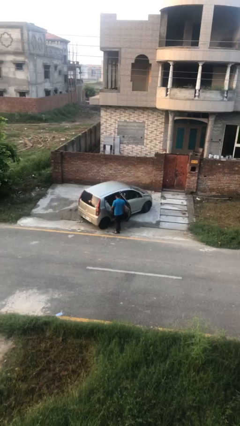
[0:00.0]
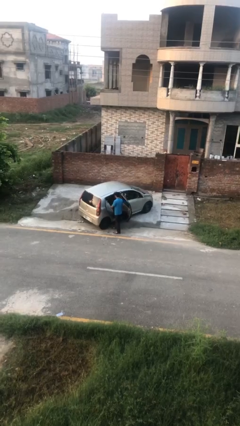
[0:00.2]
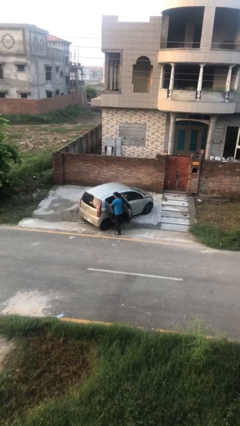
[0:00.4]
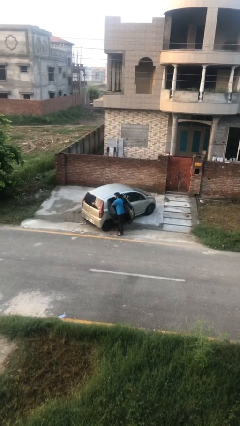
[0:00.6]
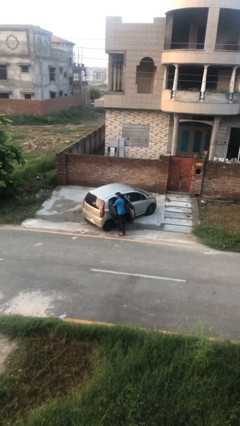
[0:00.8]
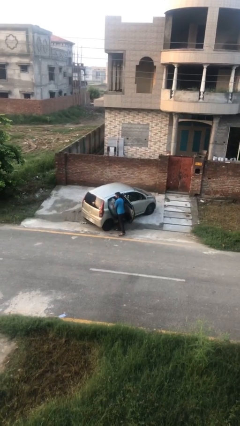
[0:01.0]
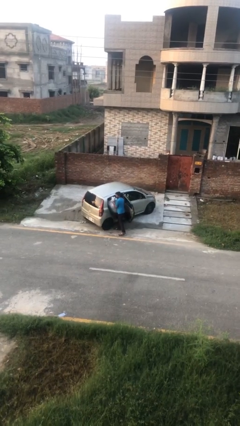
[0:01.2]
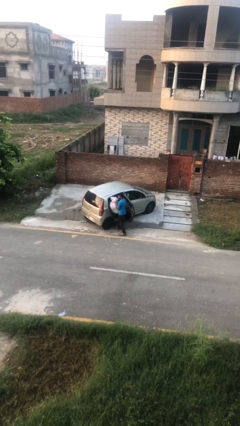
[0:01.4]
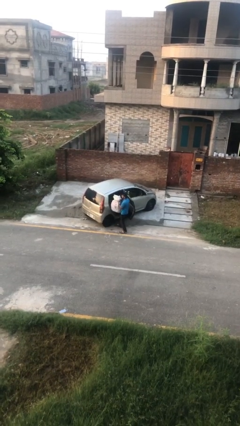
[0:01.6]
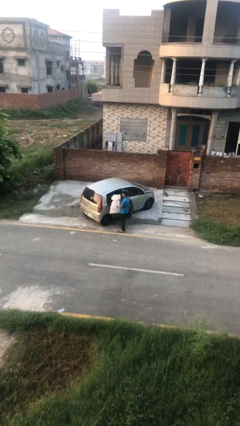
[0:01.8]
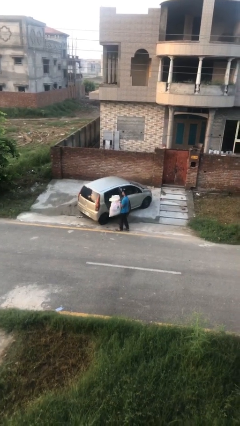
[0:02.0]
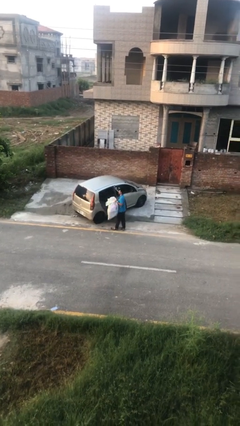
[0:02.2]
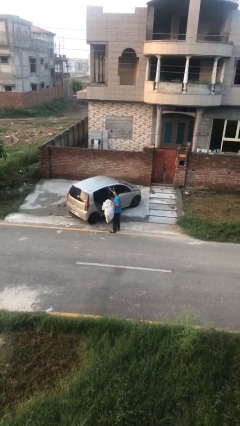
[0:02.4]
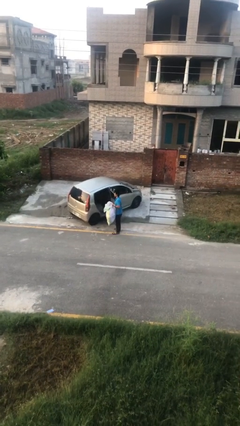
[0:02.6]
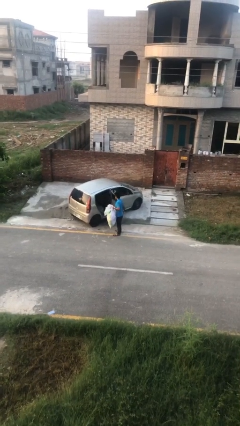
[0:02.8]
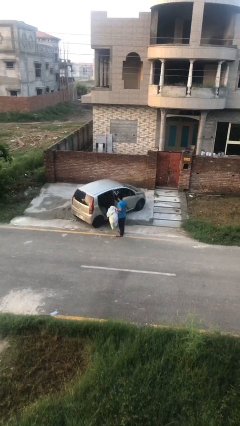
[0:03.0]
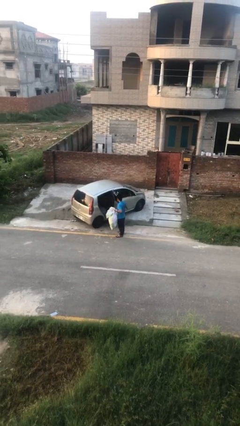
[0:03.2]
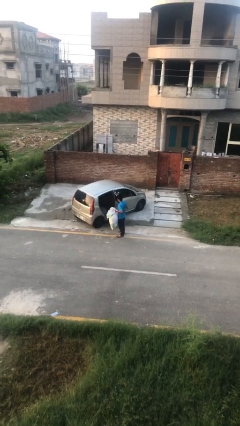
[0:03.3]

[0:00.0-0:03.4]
person unloads car

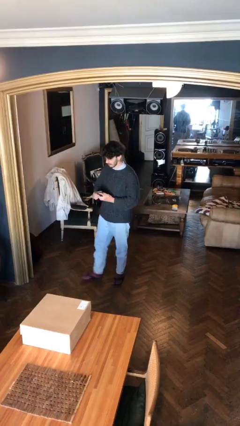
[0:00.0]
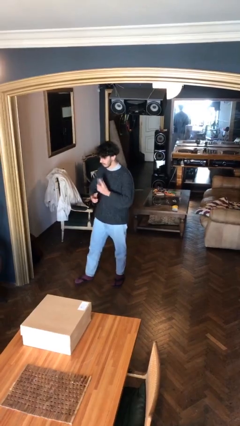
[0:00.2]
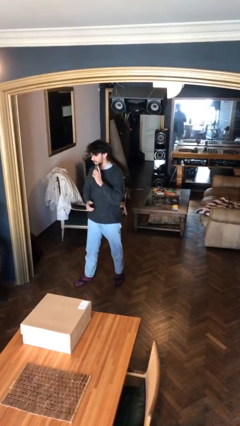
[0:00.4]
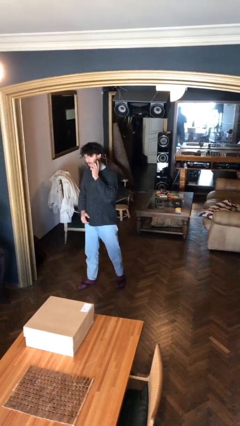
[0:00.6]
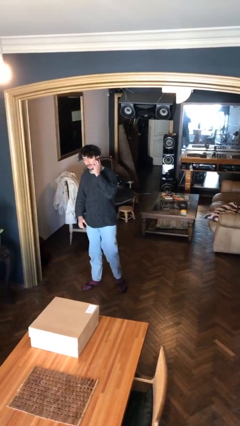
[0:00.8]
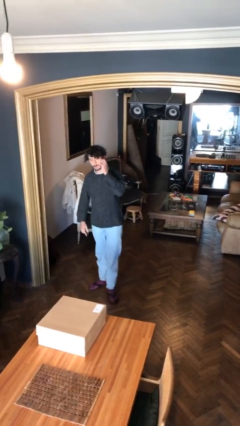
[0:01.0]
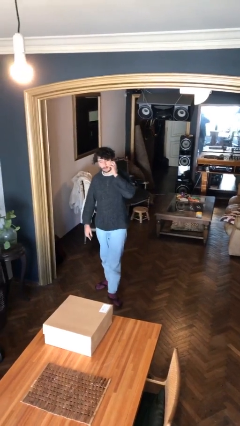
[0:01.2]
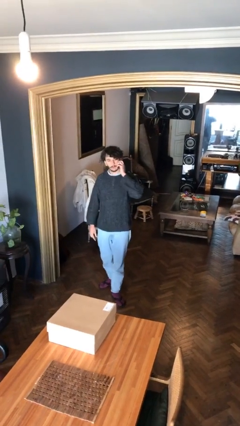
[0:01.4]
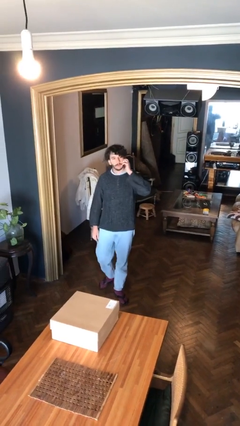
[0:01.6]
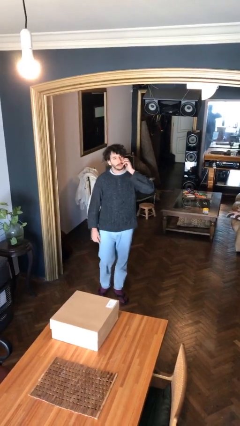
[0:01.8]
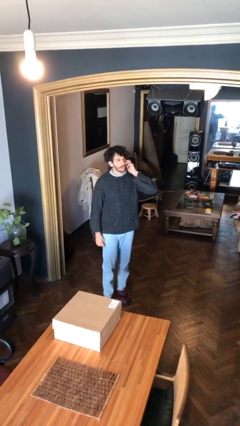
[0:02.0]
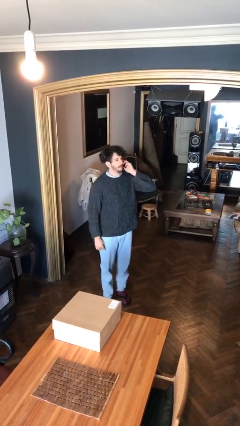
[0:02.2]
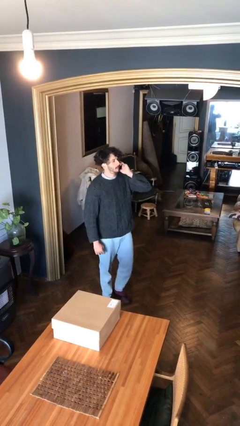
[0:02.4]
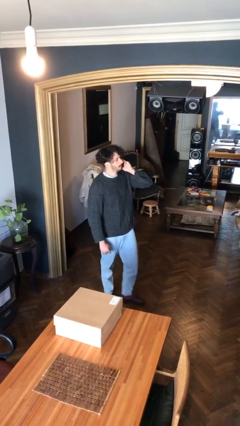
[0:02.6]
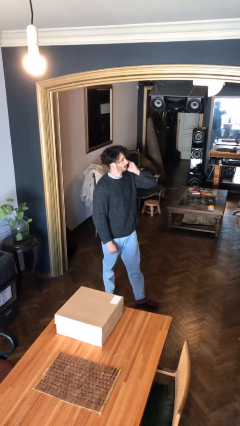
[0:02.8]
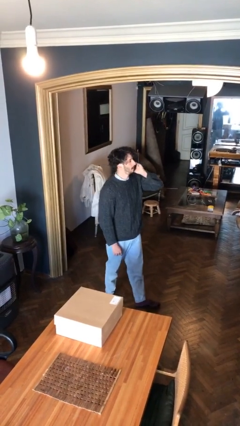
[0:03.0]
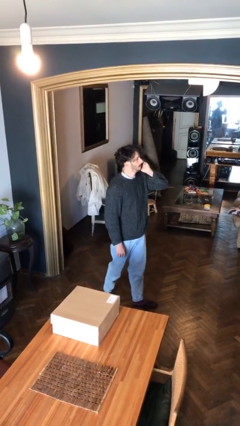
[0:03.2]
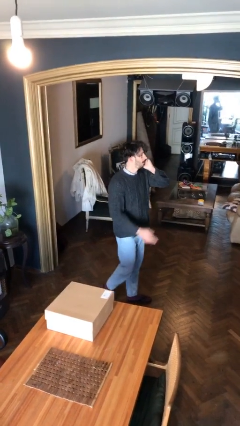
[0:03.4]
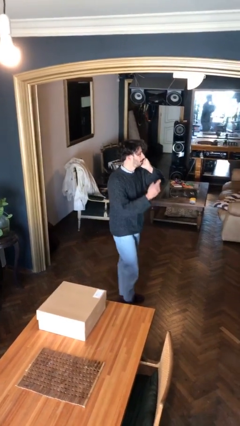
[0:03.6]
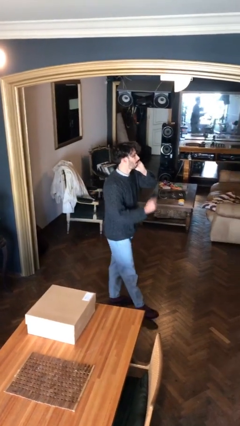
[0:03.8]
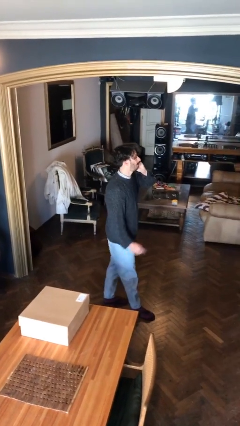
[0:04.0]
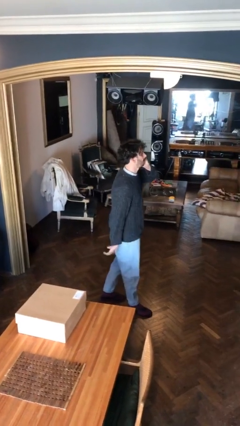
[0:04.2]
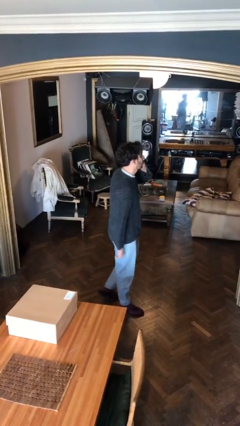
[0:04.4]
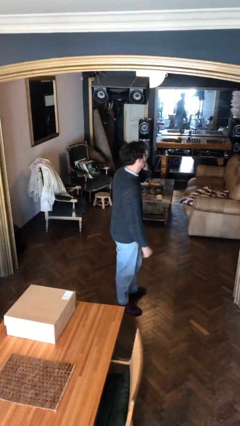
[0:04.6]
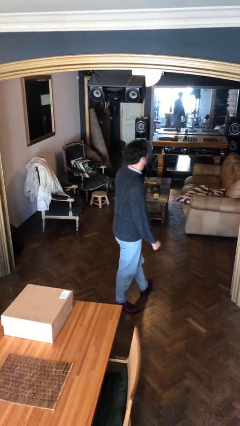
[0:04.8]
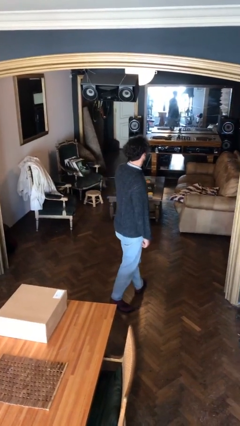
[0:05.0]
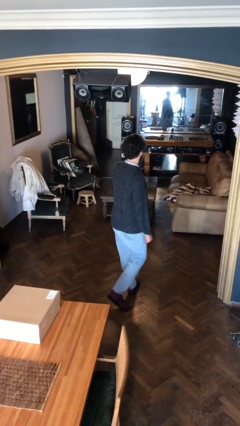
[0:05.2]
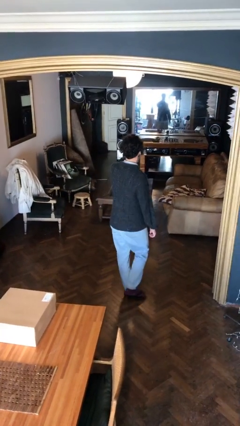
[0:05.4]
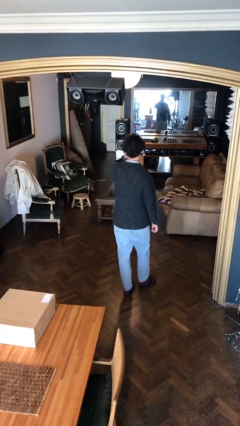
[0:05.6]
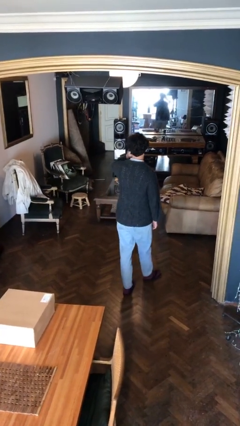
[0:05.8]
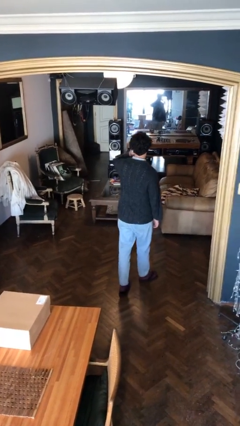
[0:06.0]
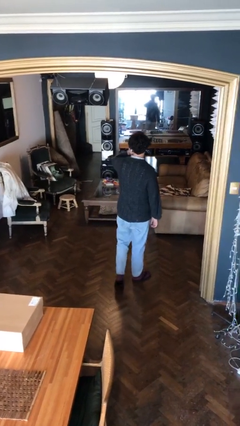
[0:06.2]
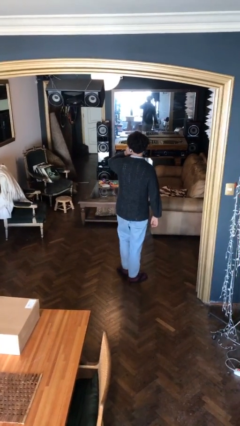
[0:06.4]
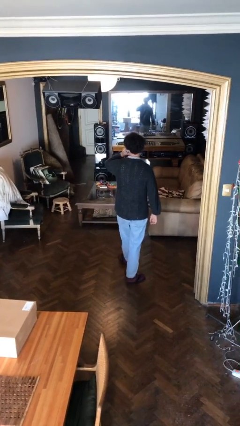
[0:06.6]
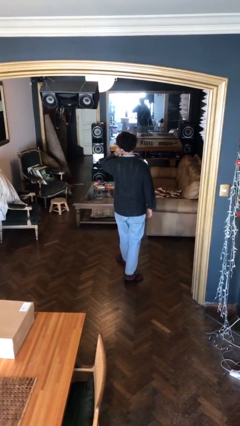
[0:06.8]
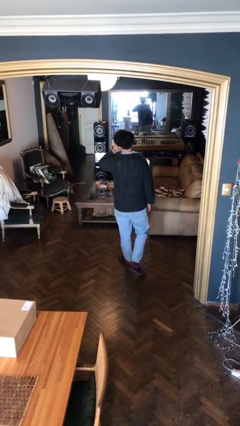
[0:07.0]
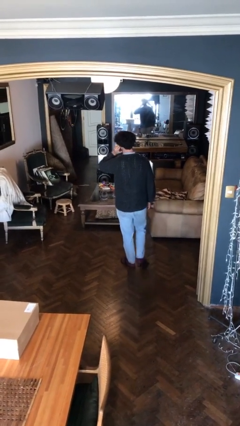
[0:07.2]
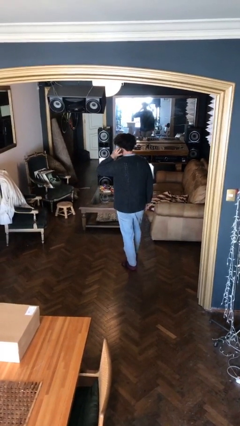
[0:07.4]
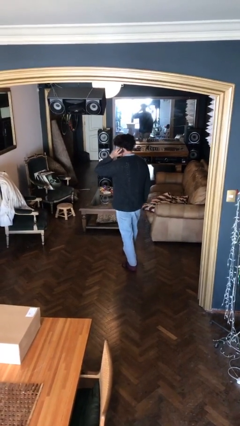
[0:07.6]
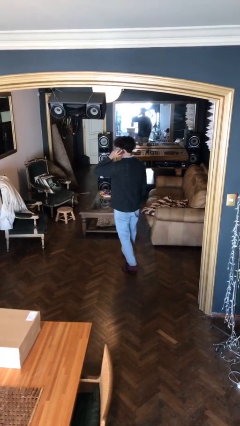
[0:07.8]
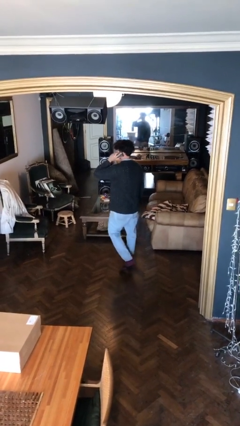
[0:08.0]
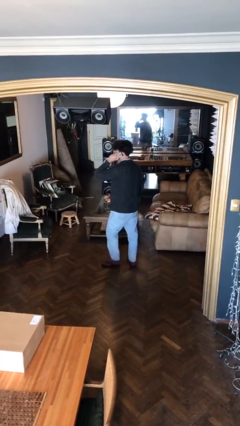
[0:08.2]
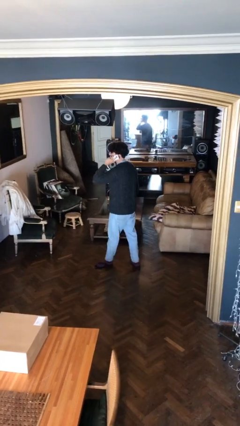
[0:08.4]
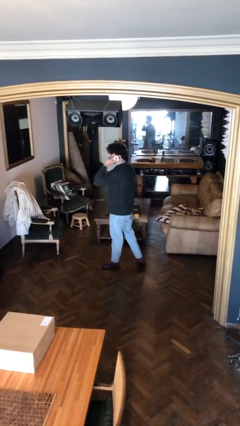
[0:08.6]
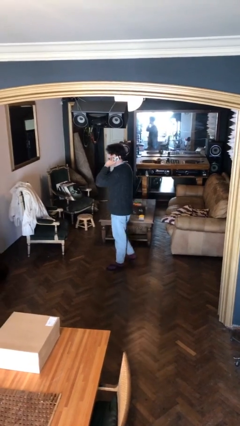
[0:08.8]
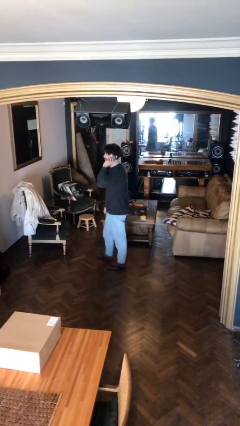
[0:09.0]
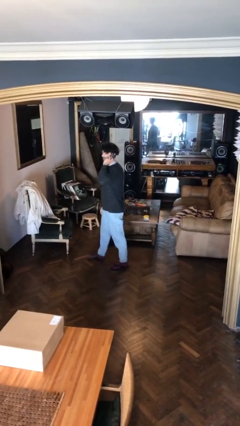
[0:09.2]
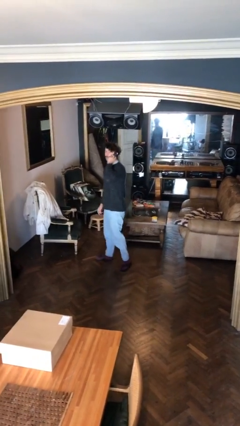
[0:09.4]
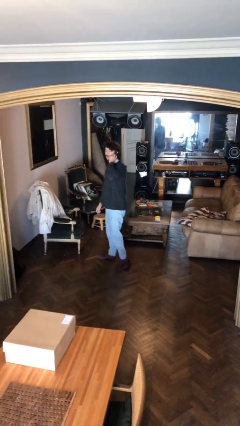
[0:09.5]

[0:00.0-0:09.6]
person talks on phone

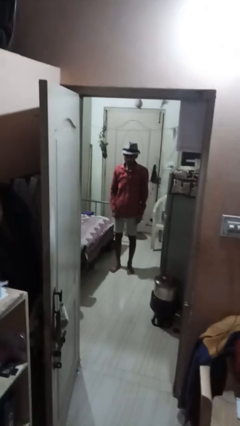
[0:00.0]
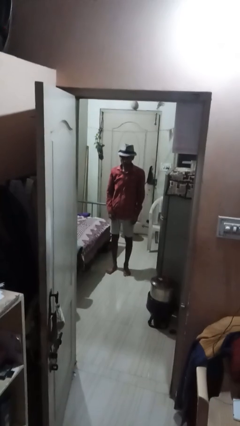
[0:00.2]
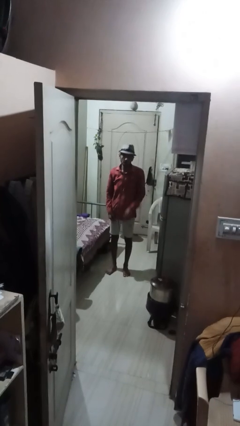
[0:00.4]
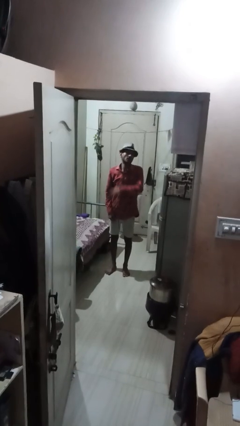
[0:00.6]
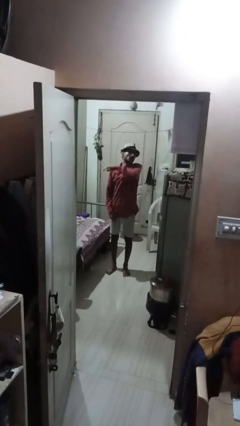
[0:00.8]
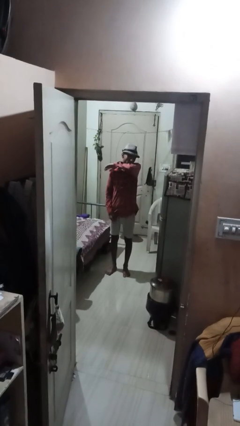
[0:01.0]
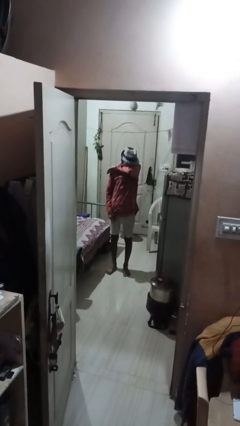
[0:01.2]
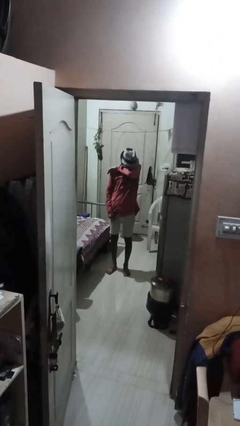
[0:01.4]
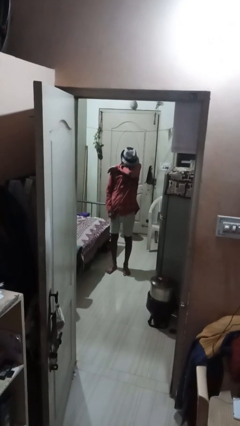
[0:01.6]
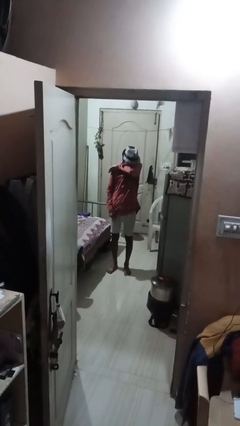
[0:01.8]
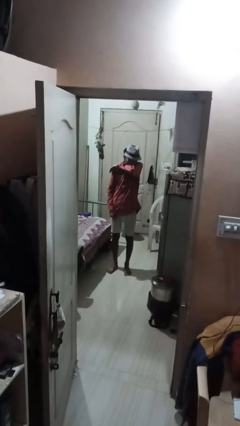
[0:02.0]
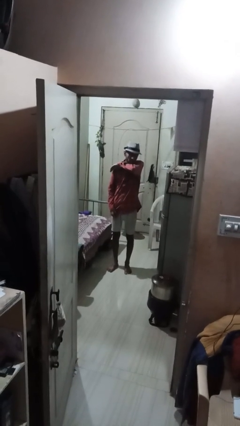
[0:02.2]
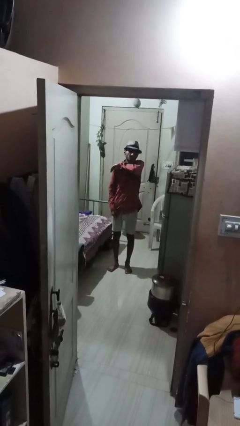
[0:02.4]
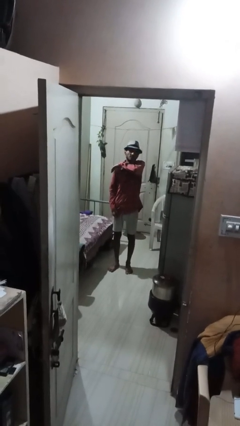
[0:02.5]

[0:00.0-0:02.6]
person sneezes into arm

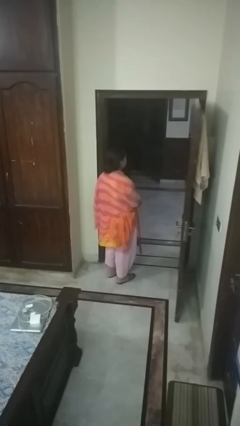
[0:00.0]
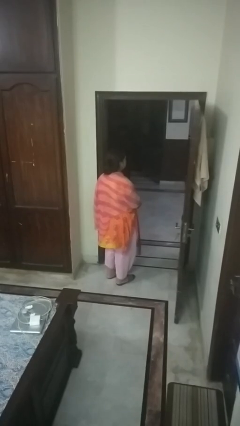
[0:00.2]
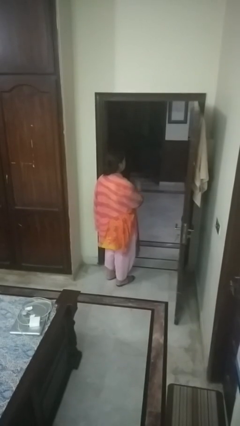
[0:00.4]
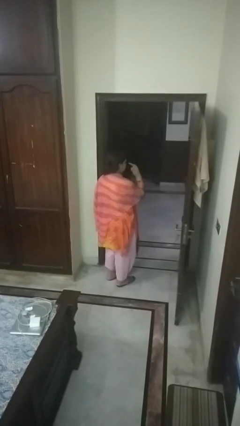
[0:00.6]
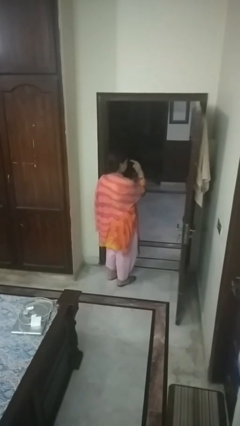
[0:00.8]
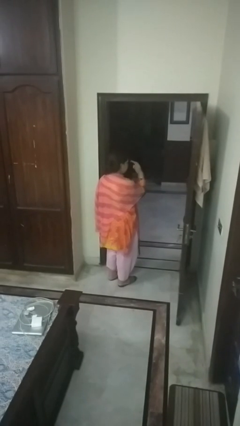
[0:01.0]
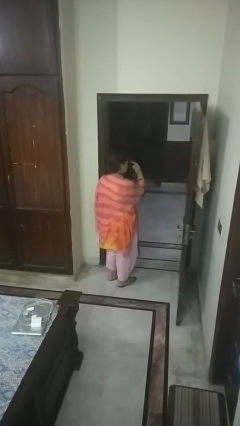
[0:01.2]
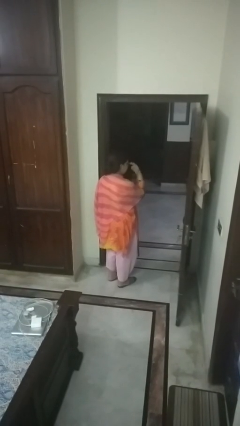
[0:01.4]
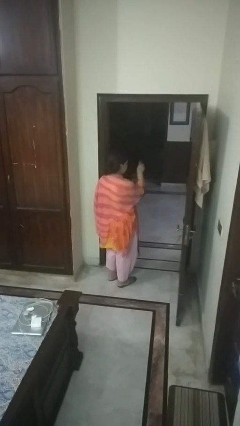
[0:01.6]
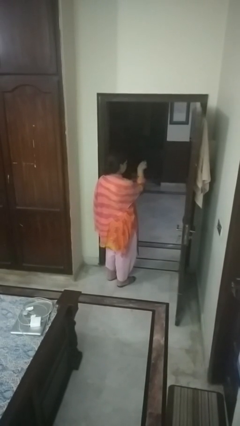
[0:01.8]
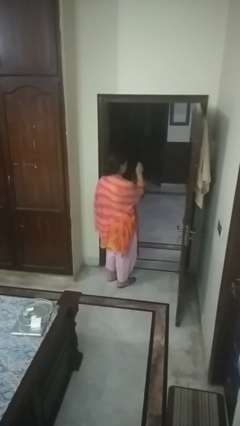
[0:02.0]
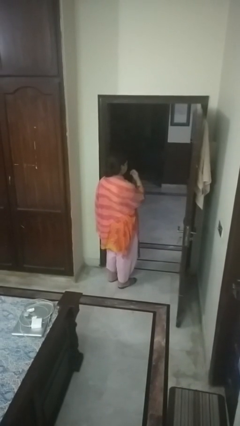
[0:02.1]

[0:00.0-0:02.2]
person gestures watch closely

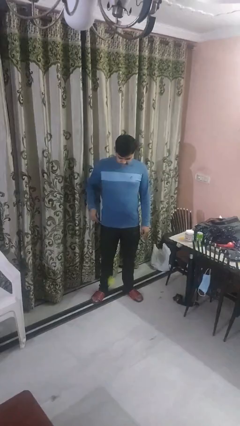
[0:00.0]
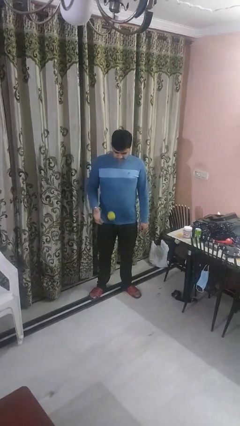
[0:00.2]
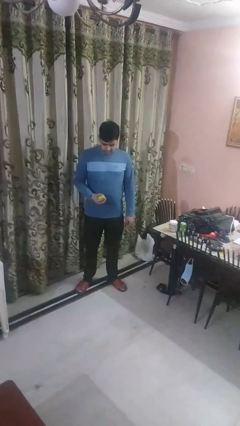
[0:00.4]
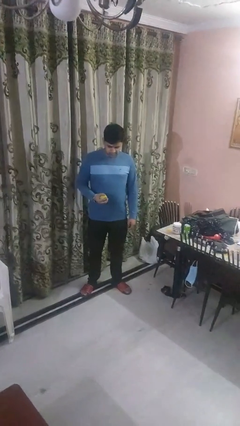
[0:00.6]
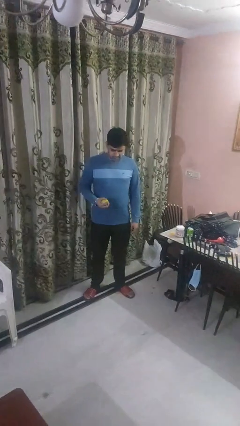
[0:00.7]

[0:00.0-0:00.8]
person bounces ball on floor
